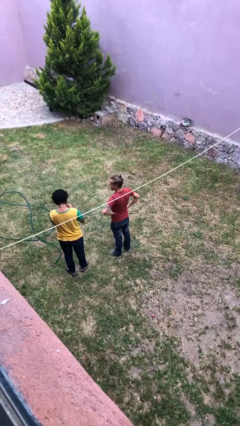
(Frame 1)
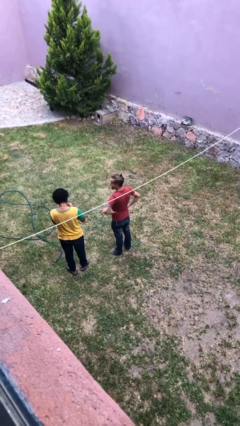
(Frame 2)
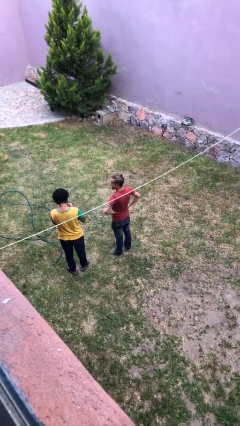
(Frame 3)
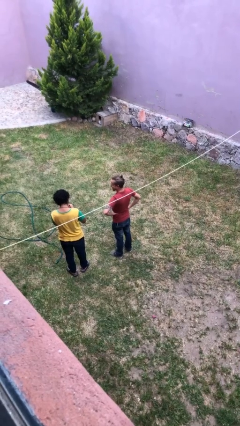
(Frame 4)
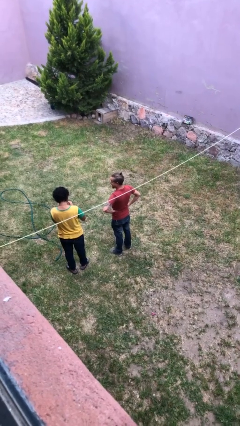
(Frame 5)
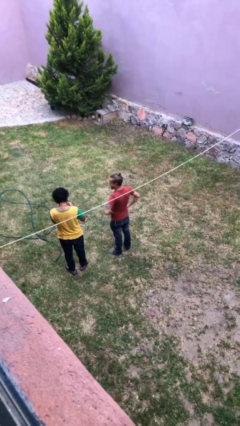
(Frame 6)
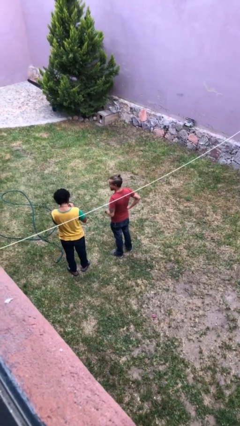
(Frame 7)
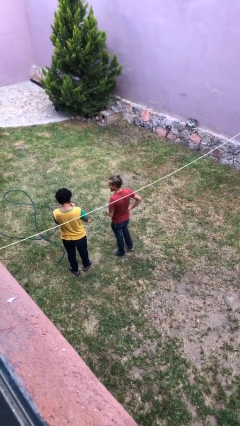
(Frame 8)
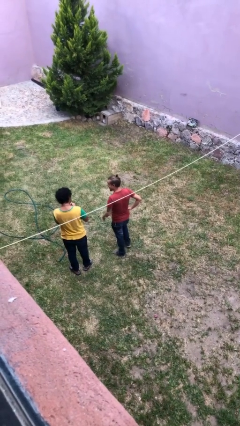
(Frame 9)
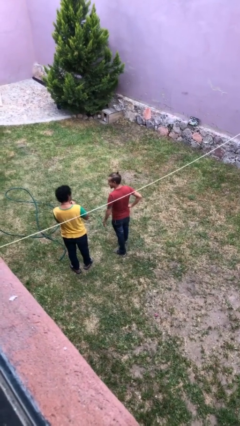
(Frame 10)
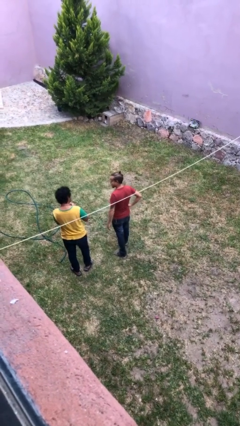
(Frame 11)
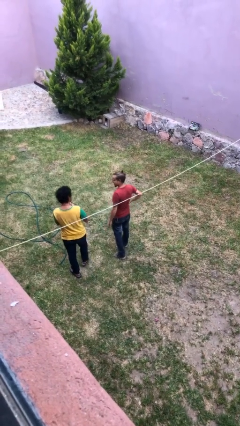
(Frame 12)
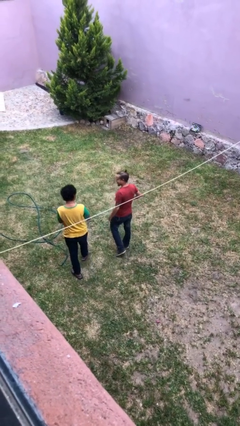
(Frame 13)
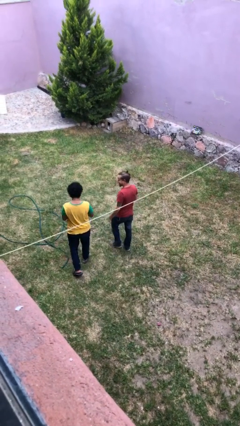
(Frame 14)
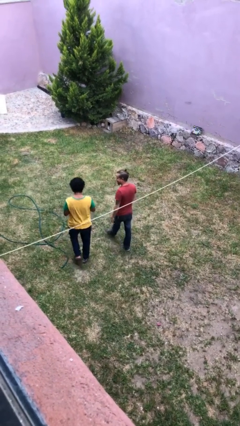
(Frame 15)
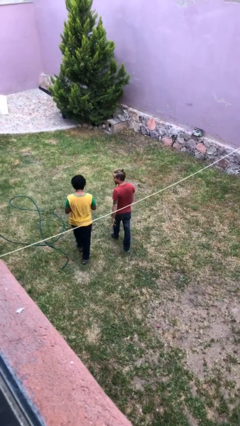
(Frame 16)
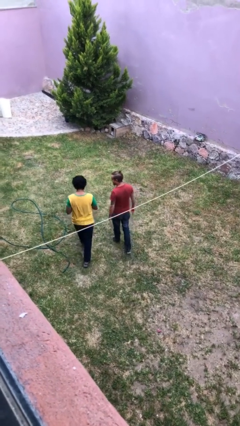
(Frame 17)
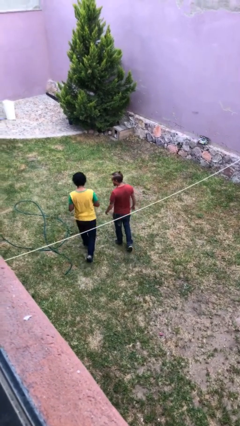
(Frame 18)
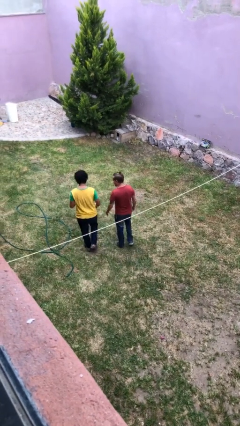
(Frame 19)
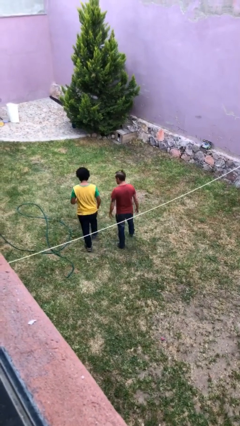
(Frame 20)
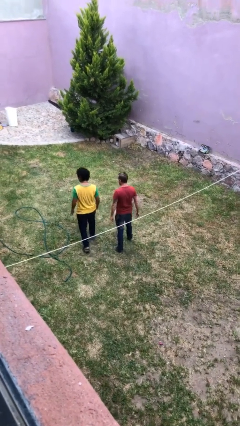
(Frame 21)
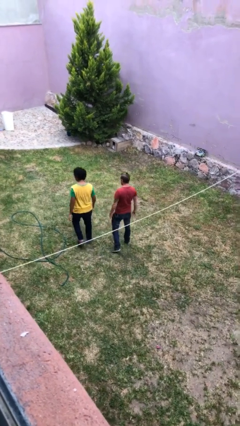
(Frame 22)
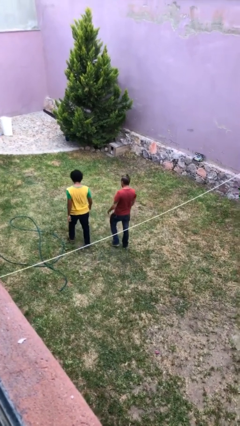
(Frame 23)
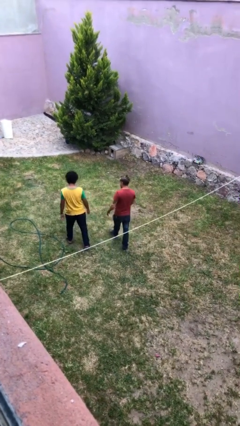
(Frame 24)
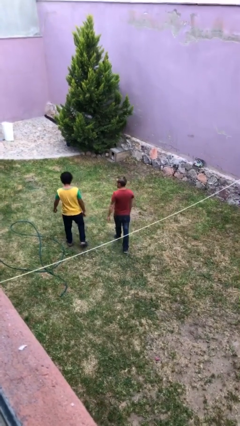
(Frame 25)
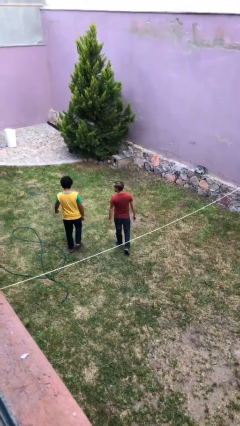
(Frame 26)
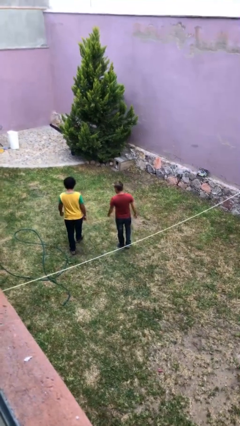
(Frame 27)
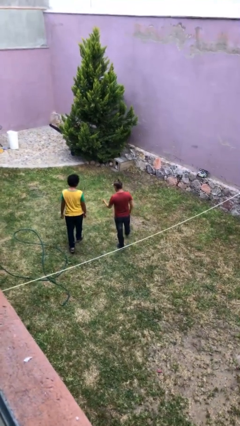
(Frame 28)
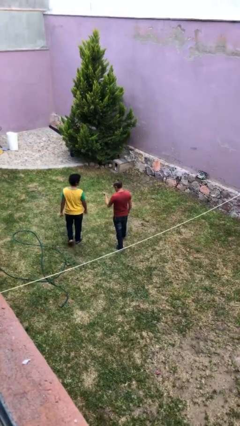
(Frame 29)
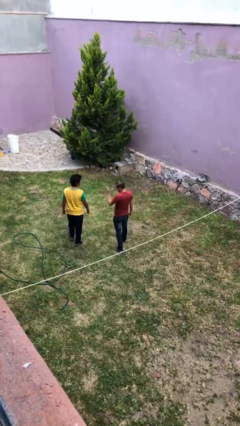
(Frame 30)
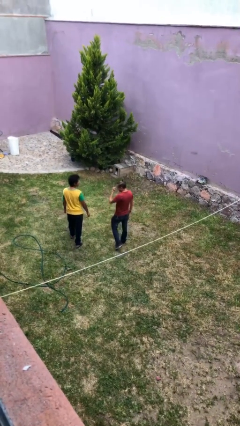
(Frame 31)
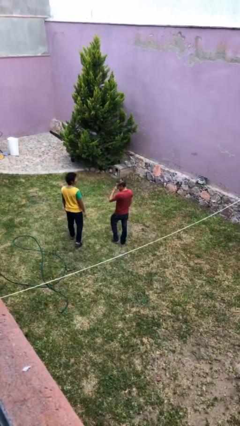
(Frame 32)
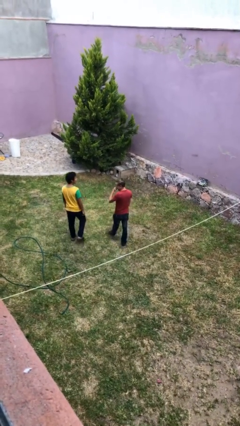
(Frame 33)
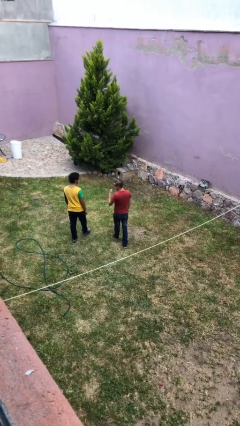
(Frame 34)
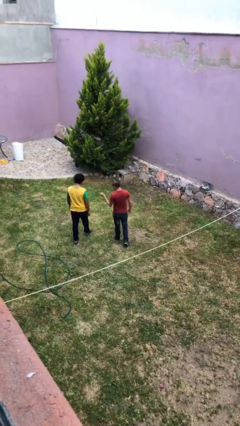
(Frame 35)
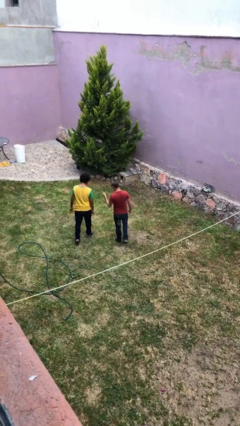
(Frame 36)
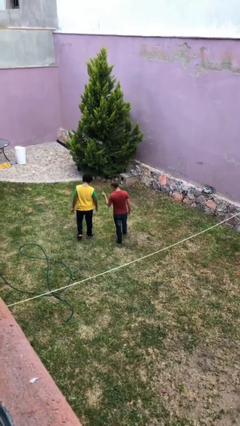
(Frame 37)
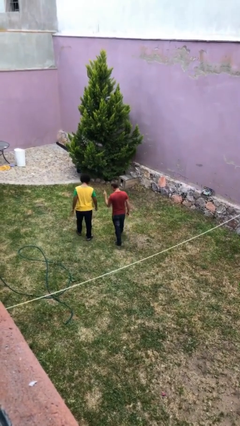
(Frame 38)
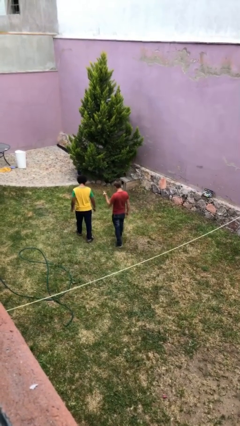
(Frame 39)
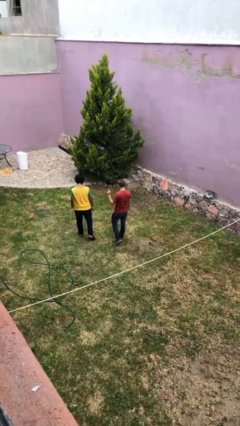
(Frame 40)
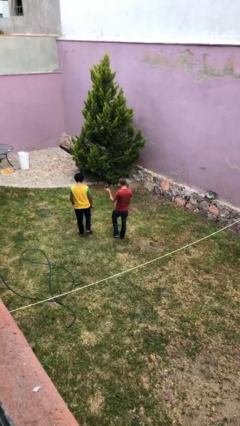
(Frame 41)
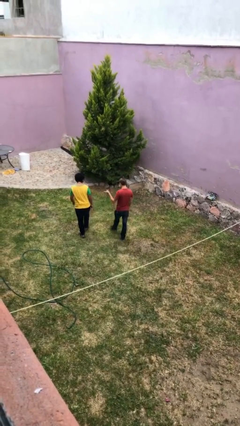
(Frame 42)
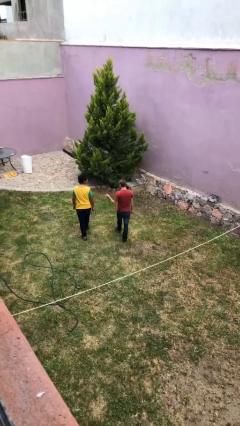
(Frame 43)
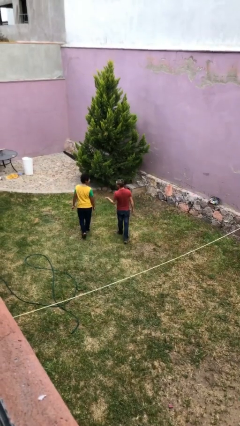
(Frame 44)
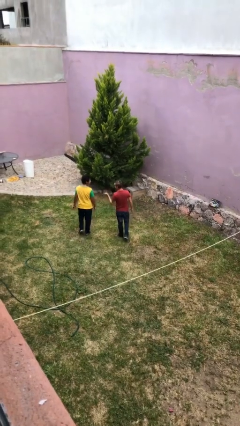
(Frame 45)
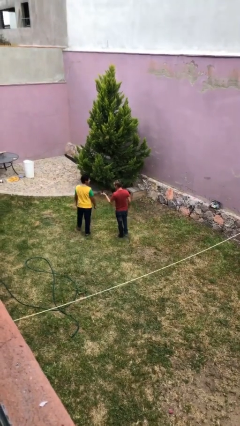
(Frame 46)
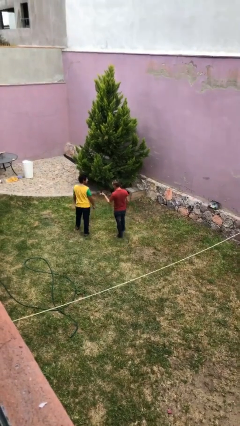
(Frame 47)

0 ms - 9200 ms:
person talks to person

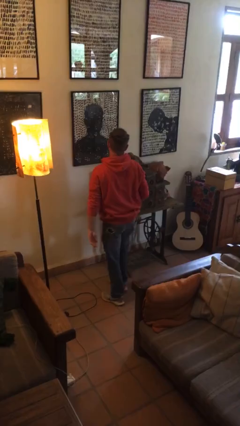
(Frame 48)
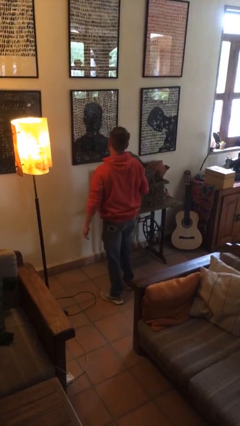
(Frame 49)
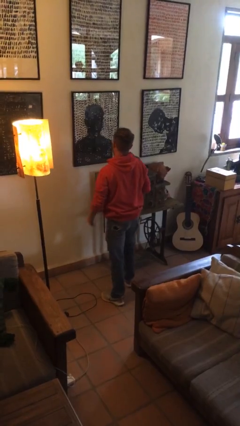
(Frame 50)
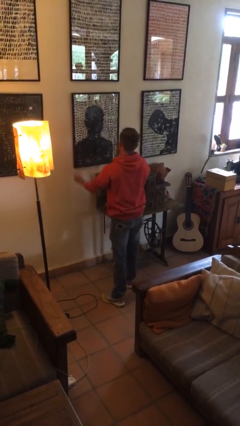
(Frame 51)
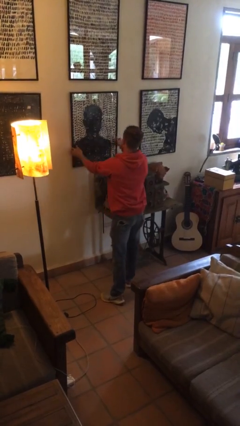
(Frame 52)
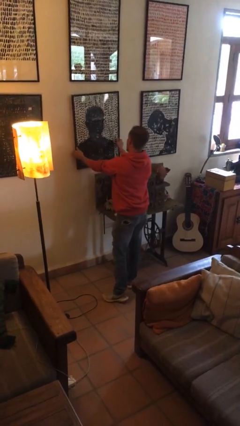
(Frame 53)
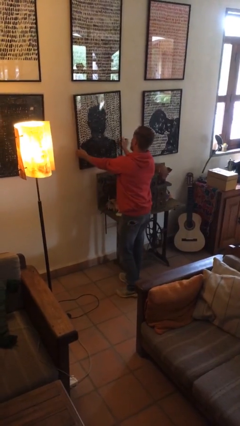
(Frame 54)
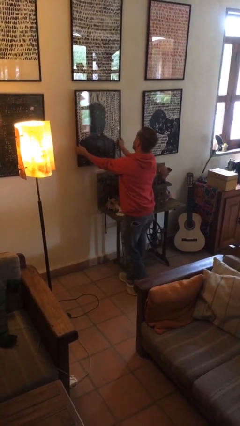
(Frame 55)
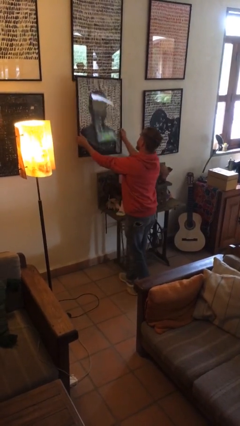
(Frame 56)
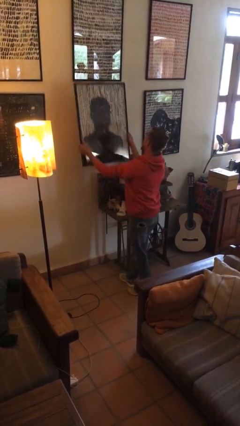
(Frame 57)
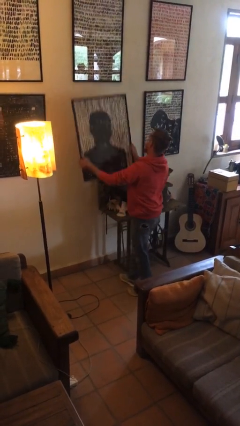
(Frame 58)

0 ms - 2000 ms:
person takes down picture frame

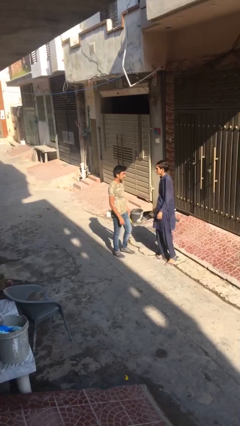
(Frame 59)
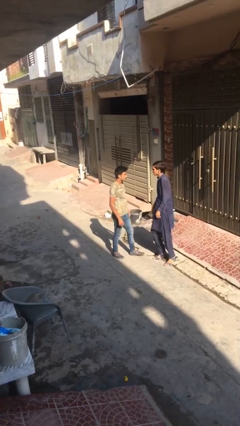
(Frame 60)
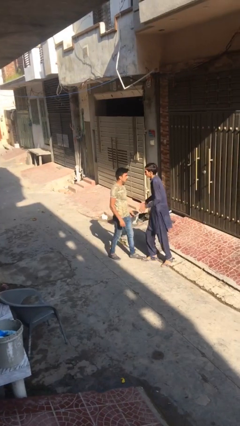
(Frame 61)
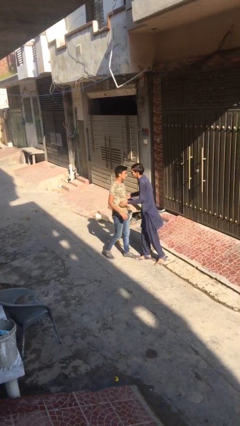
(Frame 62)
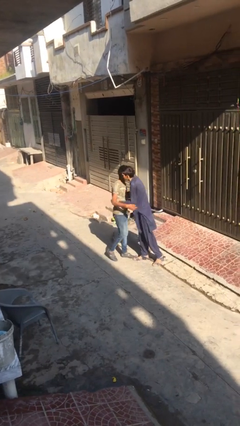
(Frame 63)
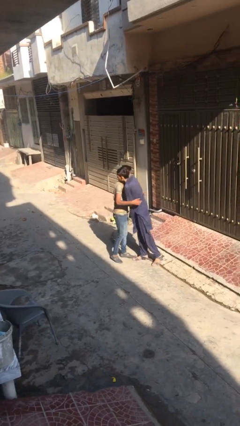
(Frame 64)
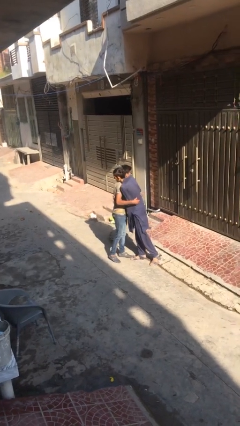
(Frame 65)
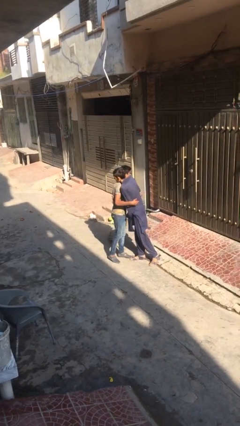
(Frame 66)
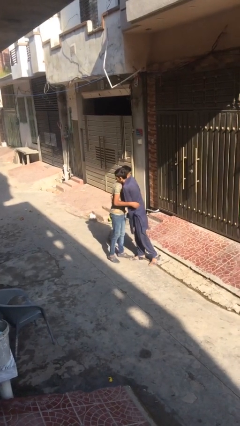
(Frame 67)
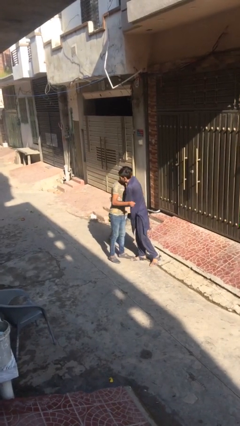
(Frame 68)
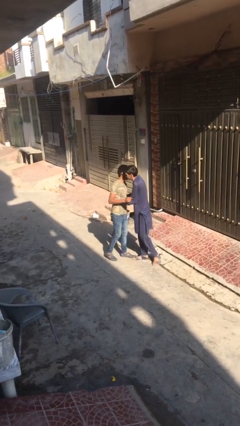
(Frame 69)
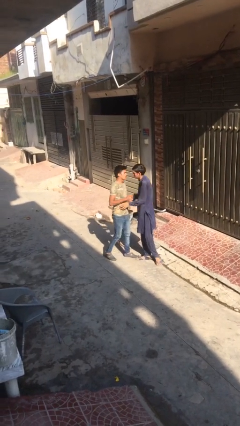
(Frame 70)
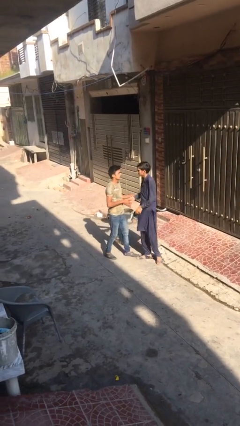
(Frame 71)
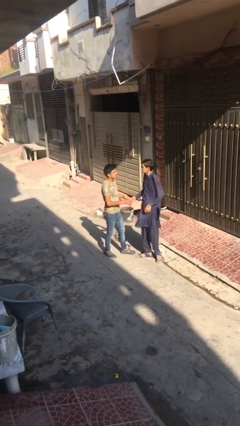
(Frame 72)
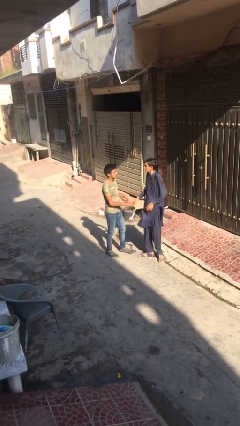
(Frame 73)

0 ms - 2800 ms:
person embraces person

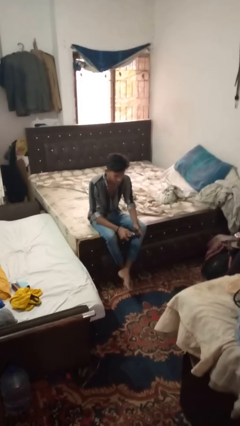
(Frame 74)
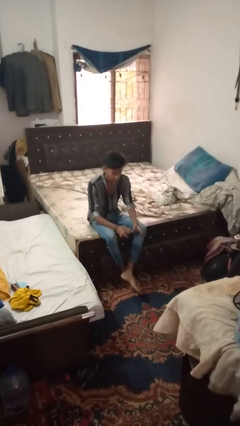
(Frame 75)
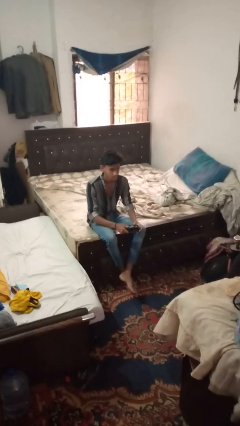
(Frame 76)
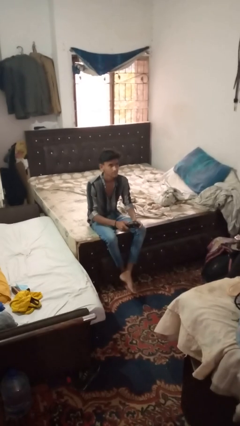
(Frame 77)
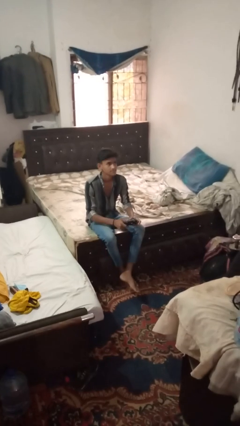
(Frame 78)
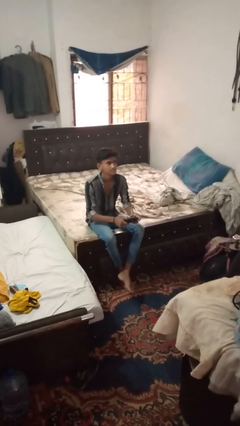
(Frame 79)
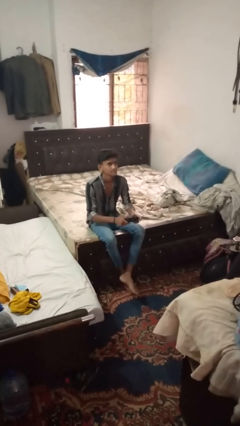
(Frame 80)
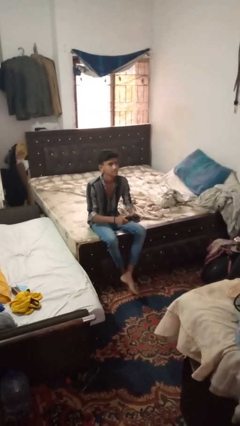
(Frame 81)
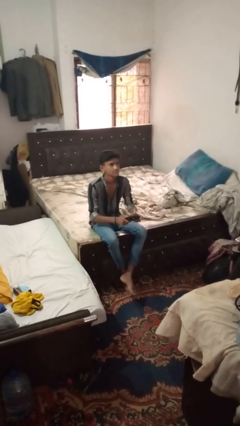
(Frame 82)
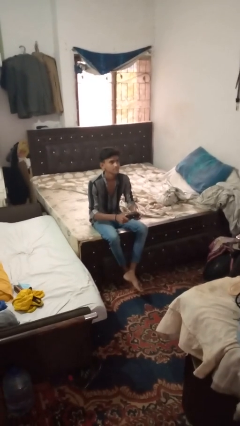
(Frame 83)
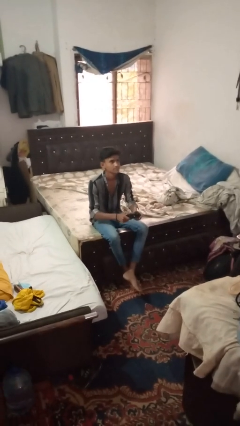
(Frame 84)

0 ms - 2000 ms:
person interacts with handheld game

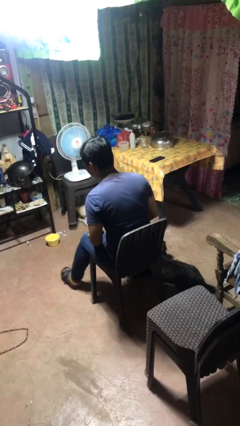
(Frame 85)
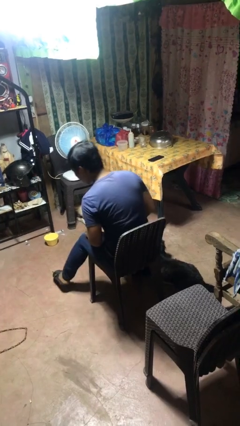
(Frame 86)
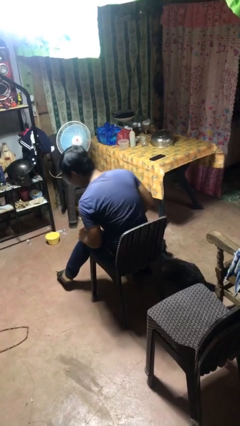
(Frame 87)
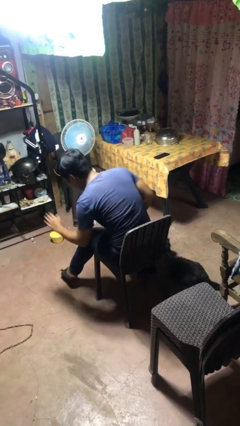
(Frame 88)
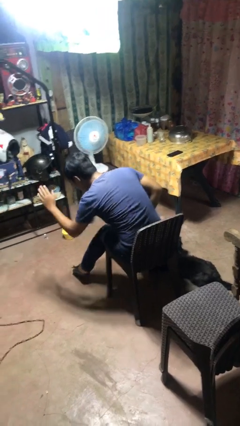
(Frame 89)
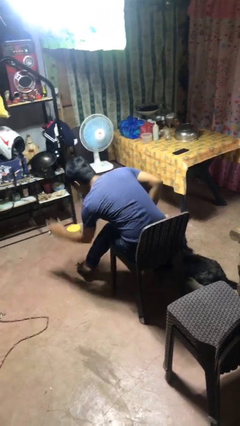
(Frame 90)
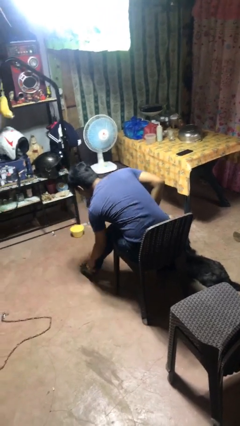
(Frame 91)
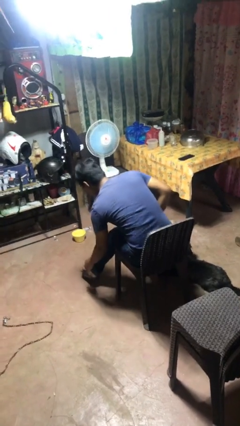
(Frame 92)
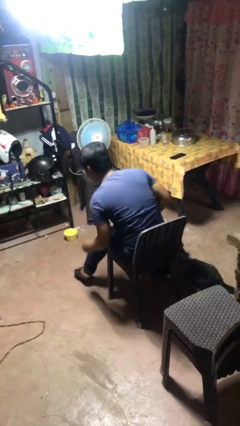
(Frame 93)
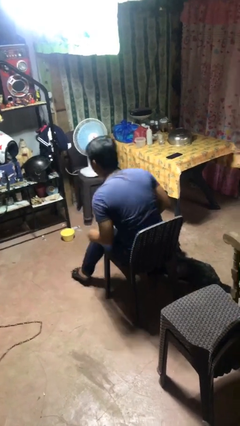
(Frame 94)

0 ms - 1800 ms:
person swats bug
